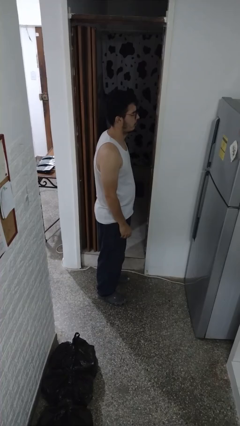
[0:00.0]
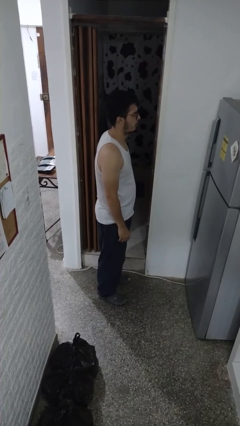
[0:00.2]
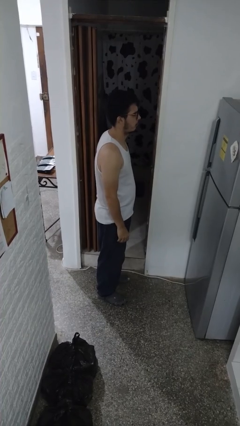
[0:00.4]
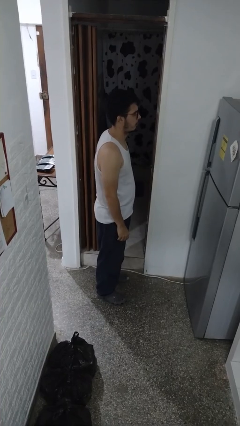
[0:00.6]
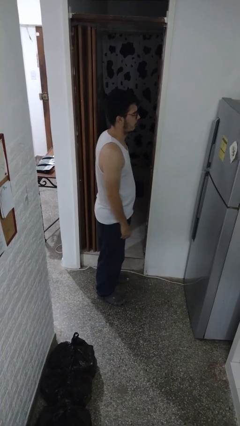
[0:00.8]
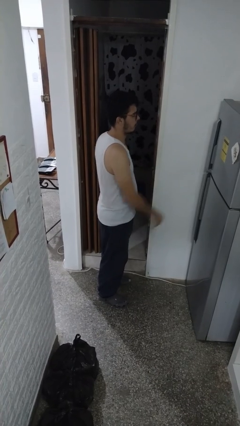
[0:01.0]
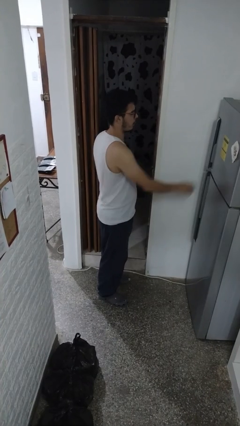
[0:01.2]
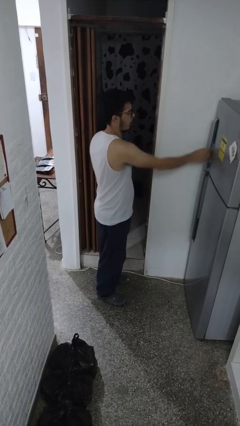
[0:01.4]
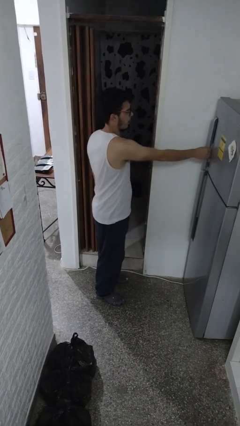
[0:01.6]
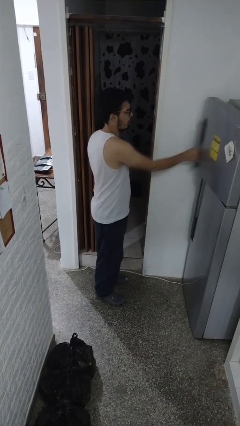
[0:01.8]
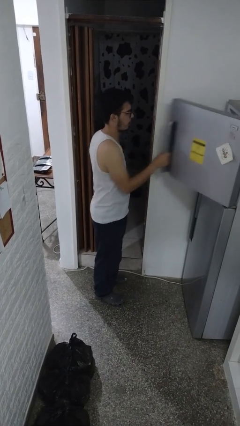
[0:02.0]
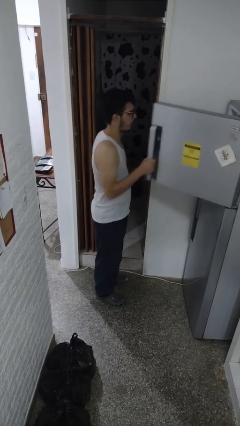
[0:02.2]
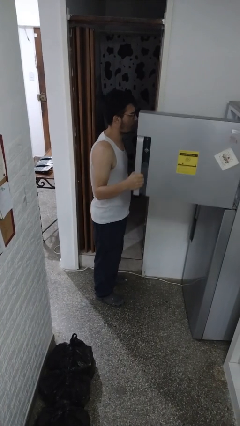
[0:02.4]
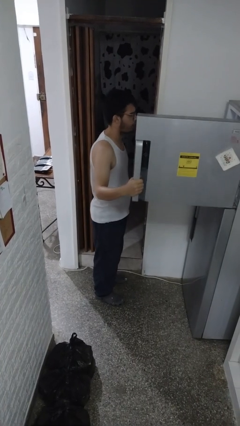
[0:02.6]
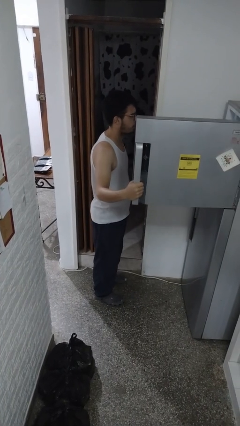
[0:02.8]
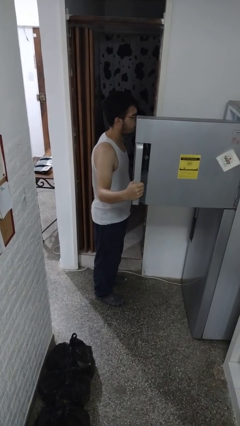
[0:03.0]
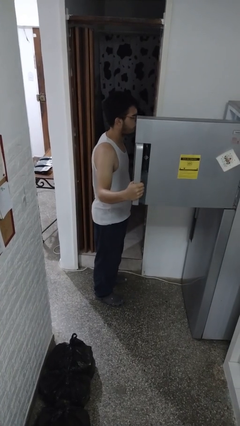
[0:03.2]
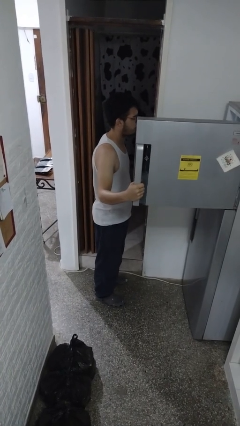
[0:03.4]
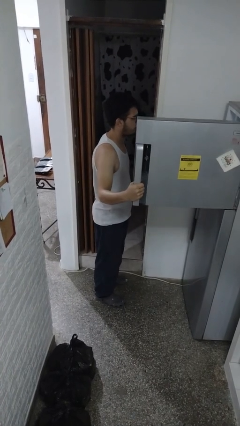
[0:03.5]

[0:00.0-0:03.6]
person opens refrigerator

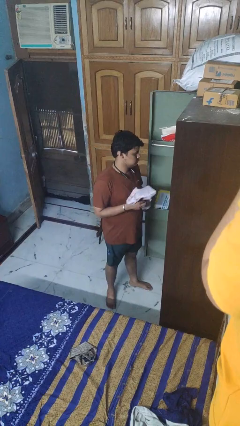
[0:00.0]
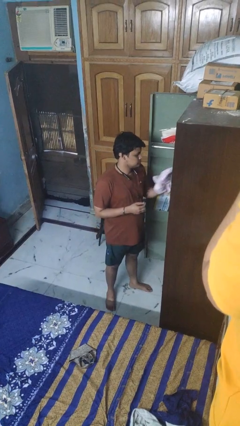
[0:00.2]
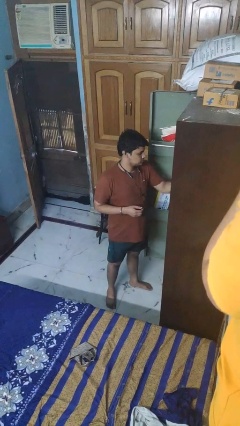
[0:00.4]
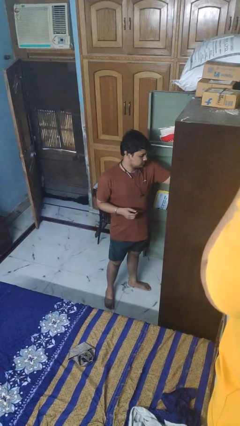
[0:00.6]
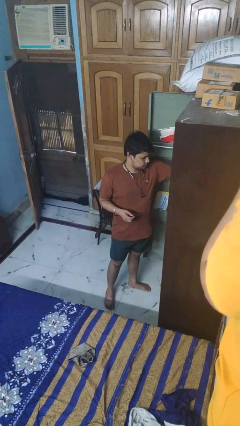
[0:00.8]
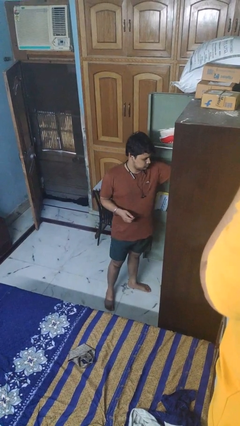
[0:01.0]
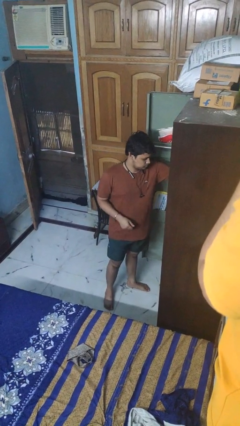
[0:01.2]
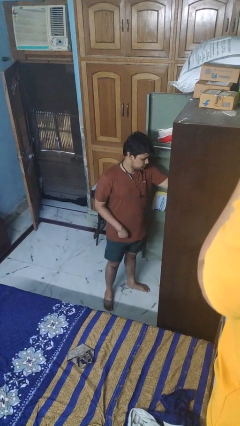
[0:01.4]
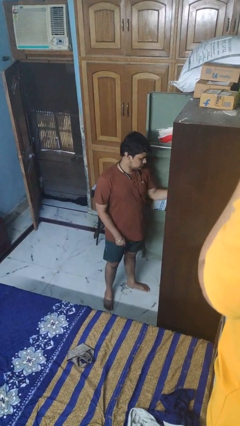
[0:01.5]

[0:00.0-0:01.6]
person puts clothes into dresser

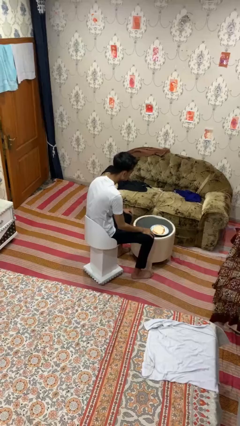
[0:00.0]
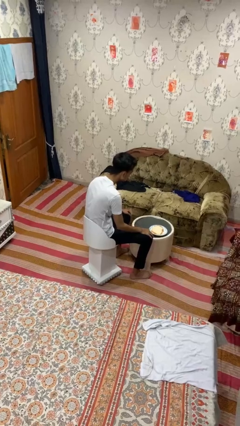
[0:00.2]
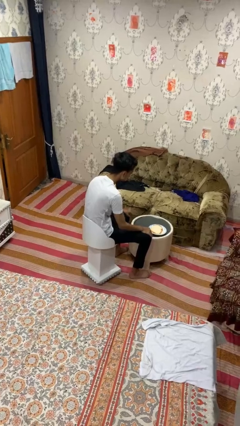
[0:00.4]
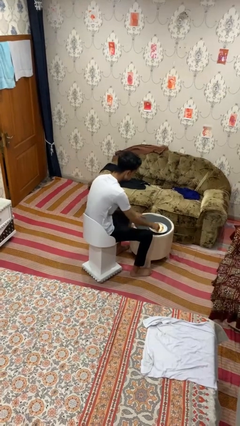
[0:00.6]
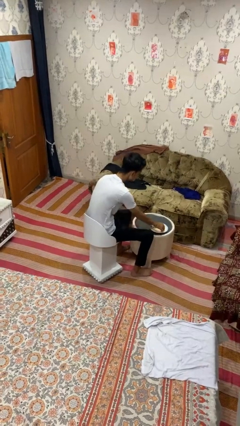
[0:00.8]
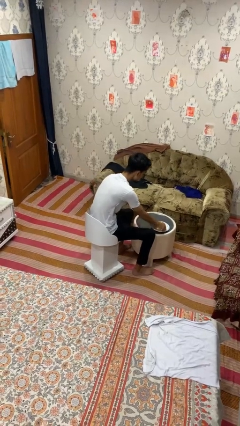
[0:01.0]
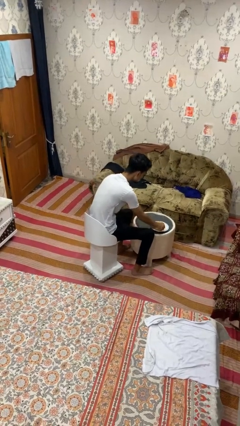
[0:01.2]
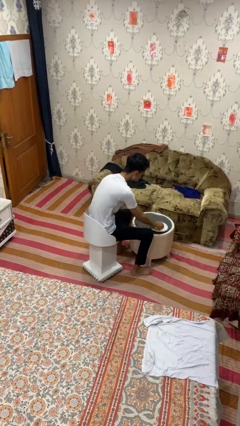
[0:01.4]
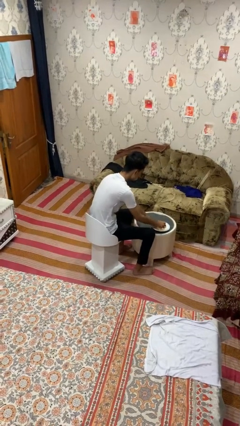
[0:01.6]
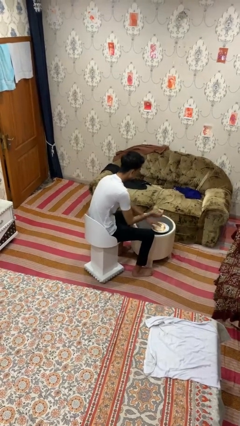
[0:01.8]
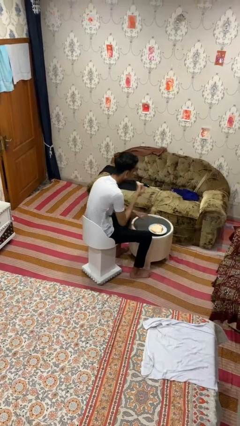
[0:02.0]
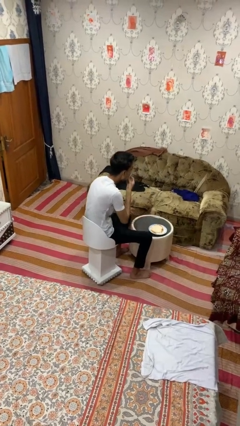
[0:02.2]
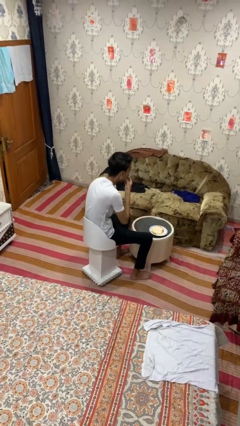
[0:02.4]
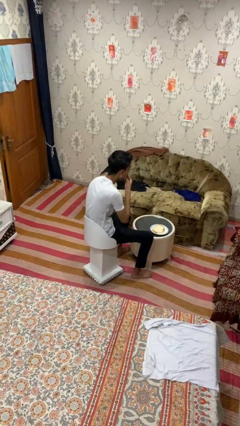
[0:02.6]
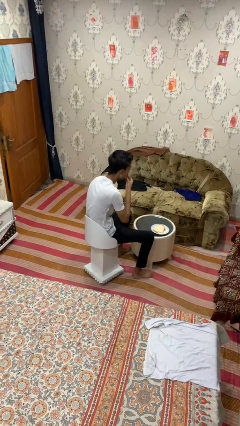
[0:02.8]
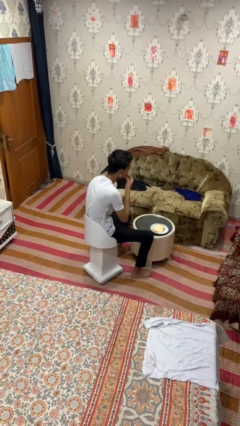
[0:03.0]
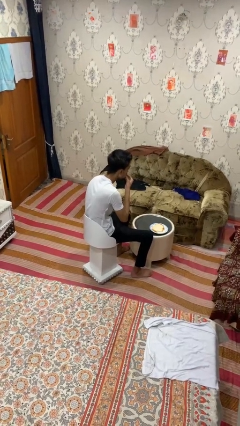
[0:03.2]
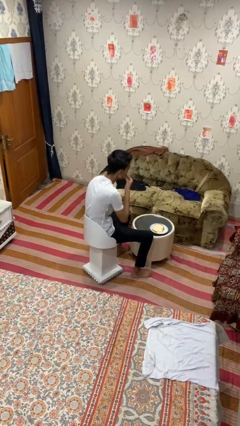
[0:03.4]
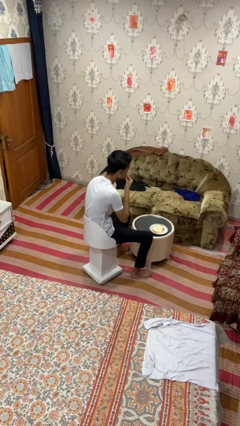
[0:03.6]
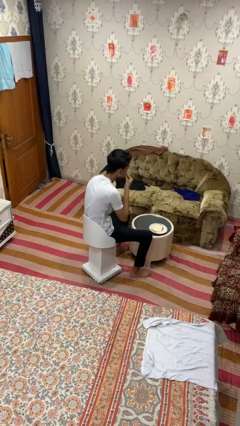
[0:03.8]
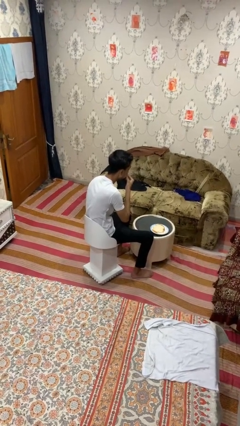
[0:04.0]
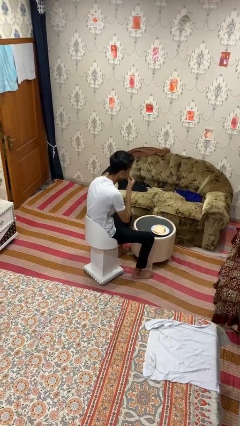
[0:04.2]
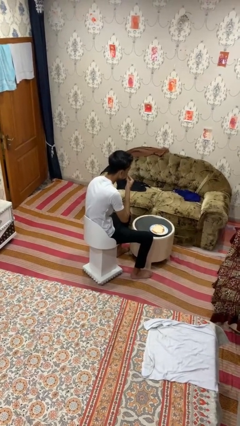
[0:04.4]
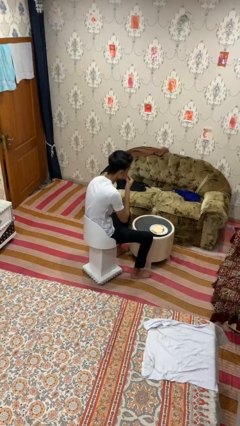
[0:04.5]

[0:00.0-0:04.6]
person eats with hands

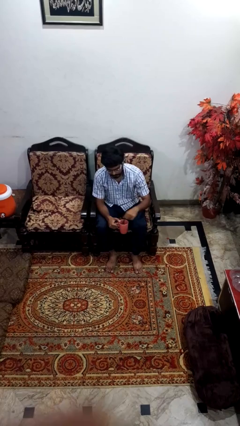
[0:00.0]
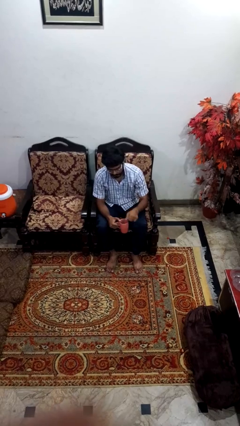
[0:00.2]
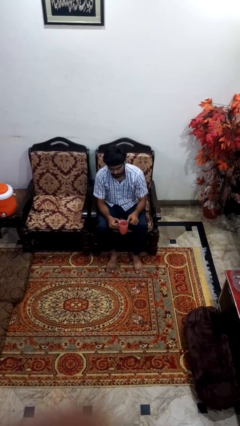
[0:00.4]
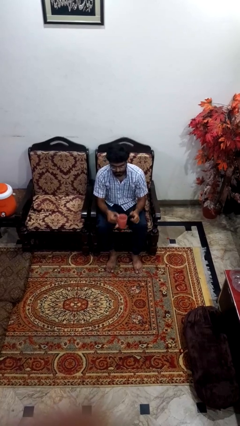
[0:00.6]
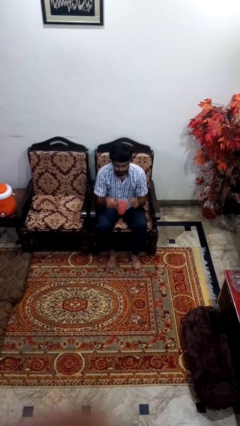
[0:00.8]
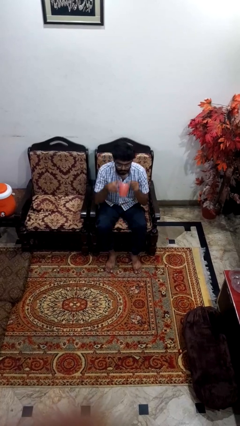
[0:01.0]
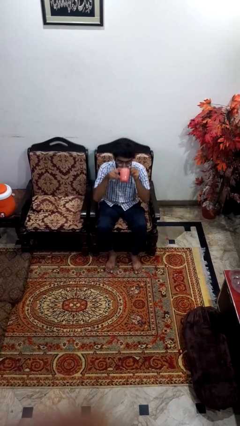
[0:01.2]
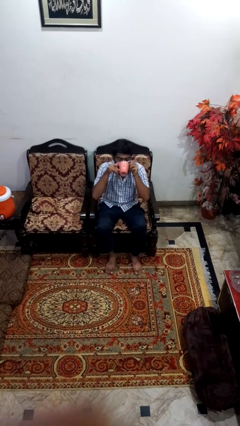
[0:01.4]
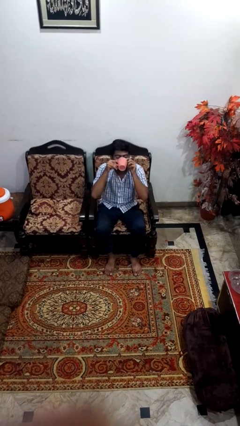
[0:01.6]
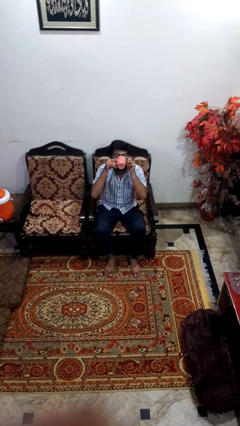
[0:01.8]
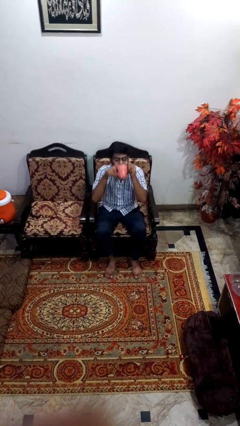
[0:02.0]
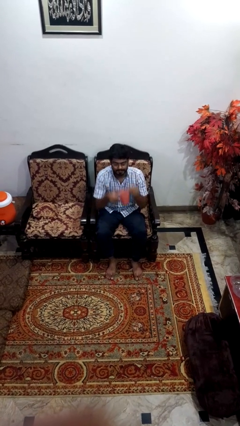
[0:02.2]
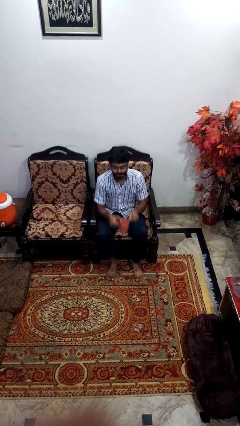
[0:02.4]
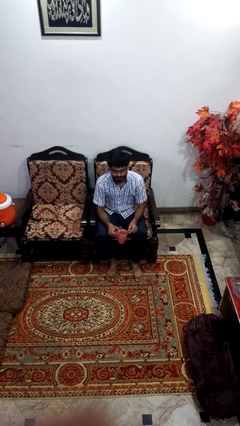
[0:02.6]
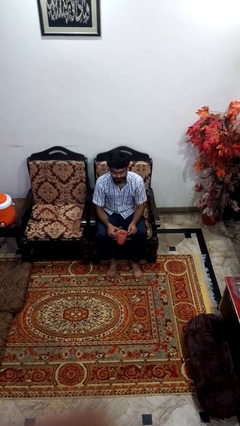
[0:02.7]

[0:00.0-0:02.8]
person drinks from mug

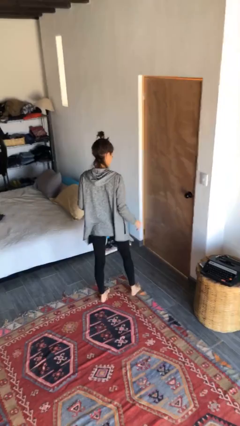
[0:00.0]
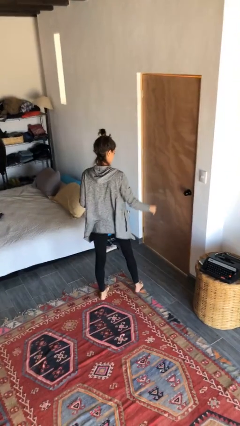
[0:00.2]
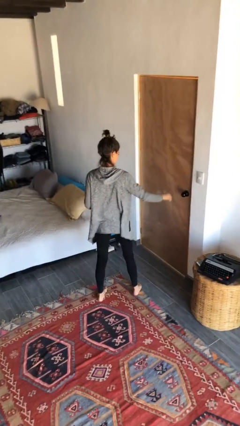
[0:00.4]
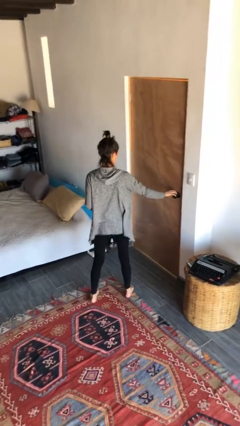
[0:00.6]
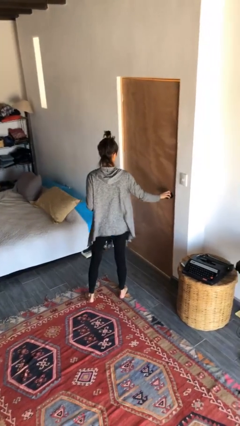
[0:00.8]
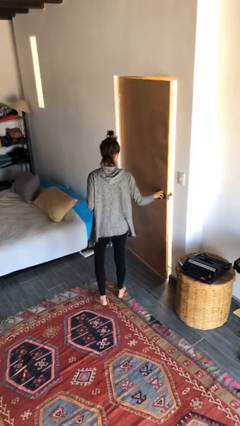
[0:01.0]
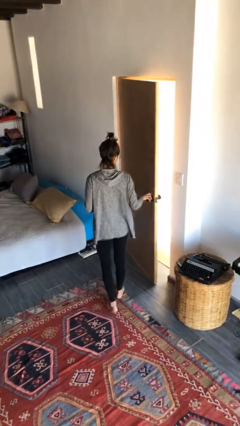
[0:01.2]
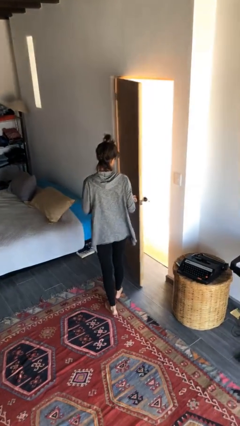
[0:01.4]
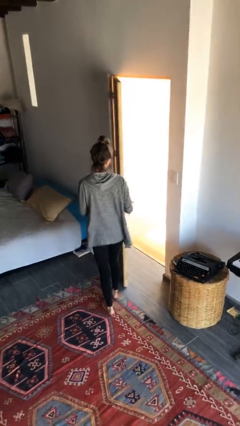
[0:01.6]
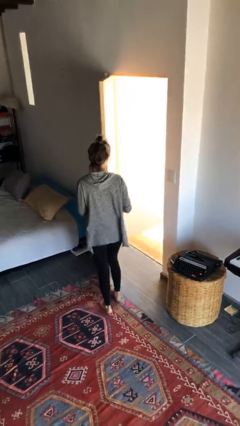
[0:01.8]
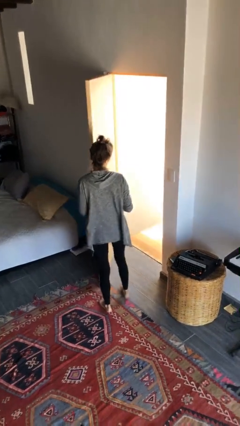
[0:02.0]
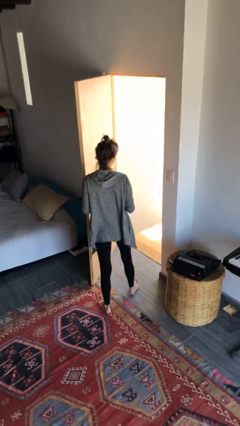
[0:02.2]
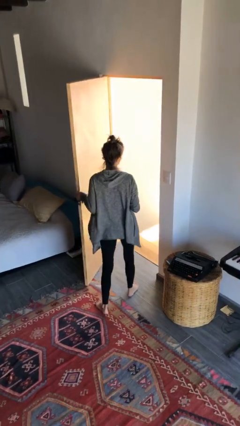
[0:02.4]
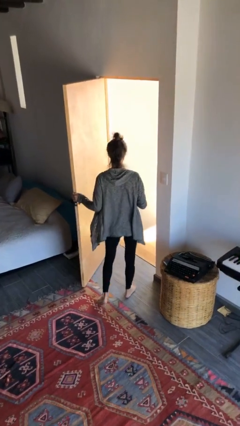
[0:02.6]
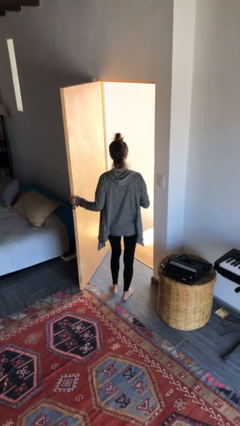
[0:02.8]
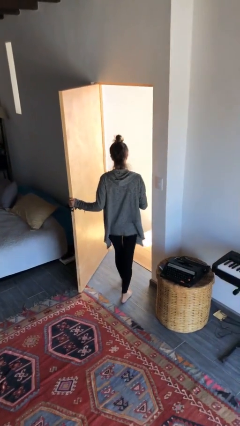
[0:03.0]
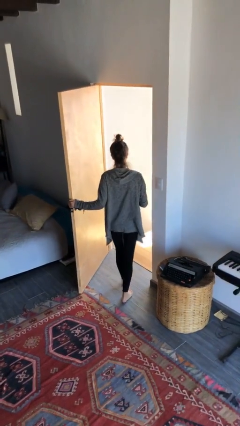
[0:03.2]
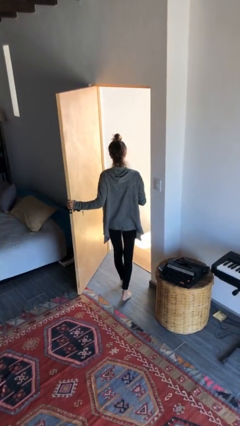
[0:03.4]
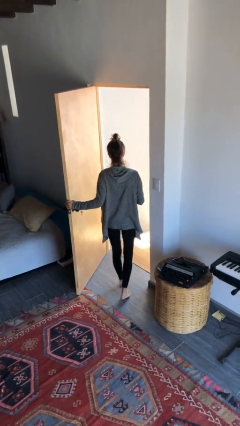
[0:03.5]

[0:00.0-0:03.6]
person opens facility door

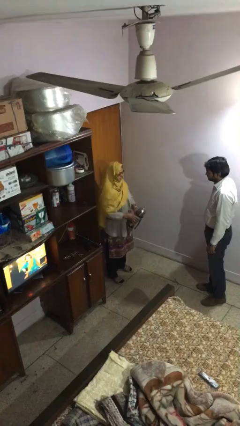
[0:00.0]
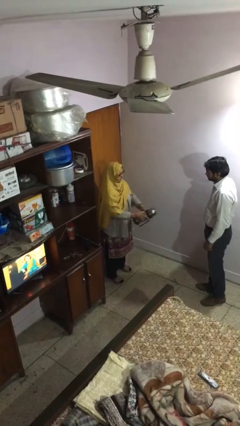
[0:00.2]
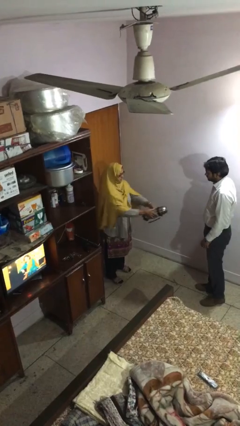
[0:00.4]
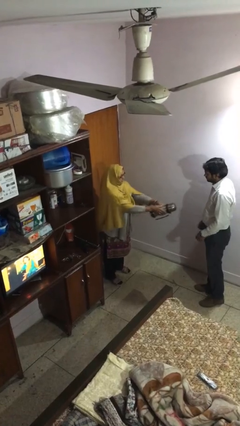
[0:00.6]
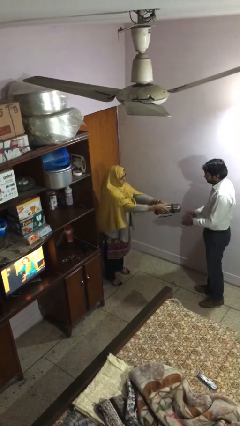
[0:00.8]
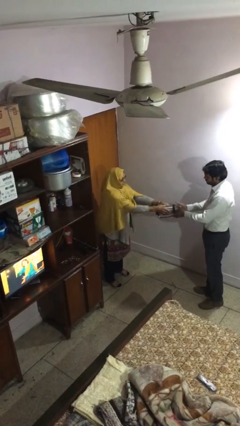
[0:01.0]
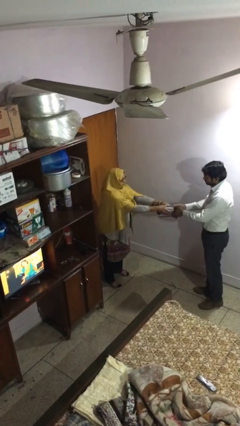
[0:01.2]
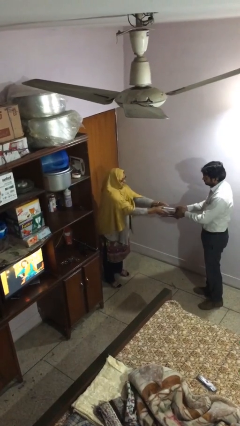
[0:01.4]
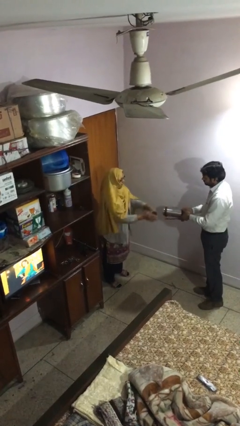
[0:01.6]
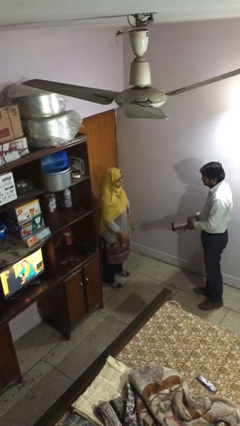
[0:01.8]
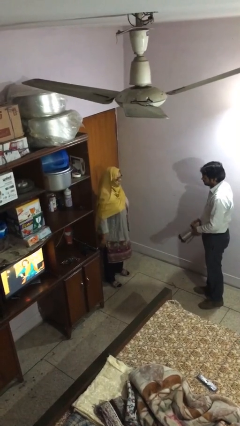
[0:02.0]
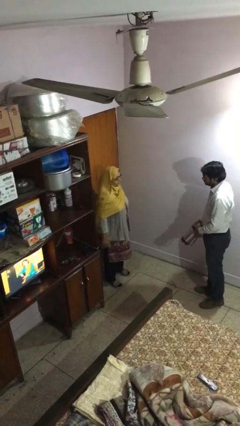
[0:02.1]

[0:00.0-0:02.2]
person transfers object to person
